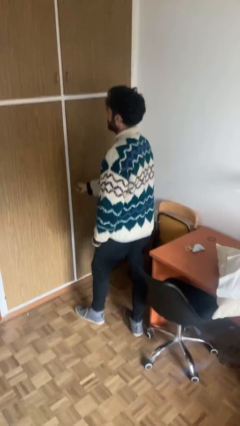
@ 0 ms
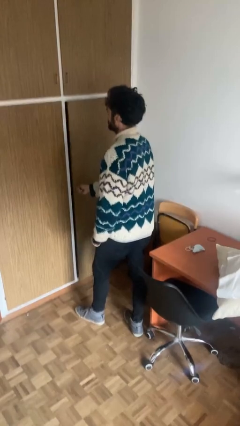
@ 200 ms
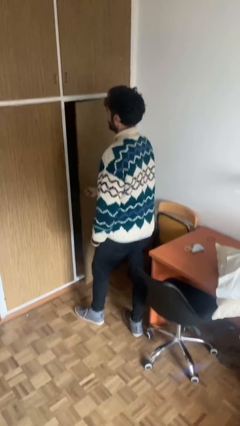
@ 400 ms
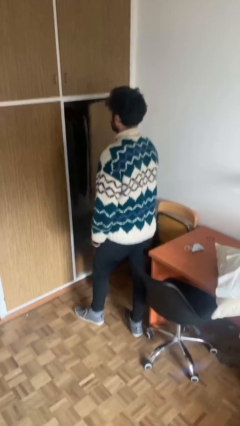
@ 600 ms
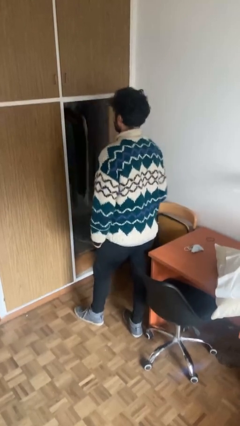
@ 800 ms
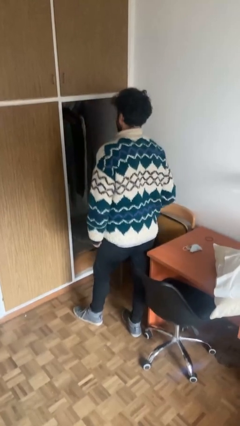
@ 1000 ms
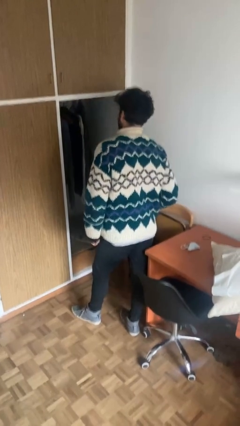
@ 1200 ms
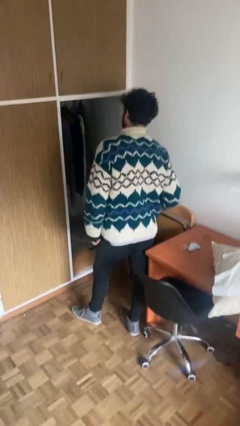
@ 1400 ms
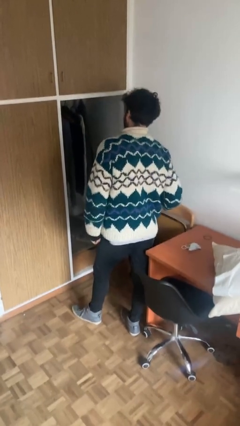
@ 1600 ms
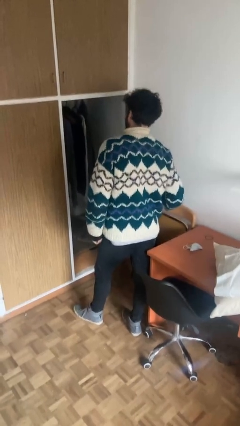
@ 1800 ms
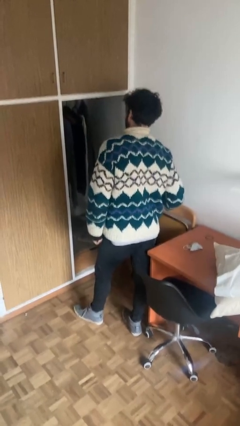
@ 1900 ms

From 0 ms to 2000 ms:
person opens closet door

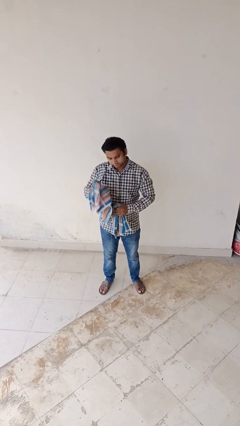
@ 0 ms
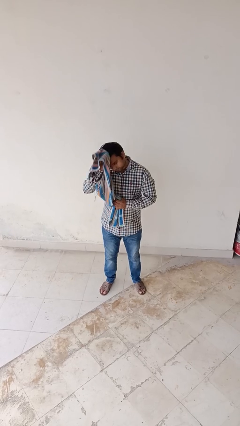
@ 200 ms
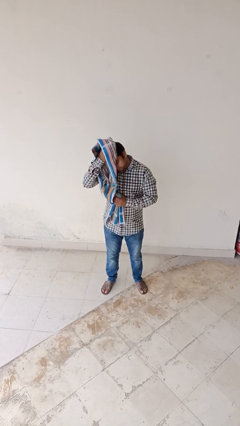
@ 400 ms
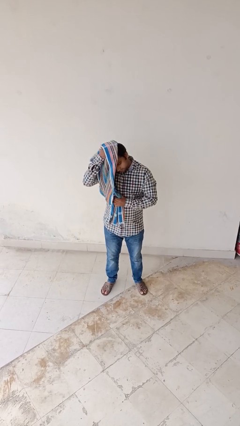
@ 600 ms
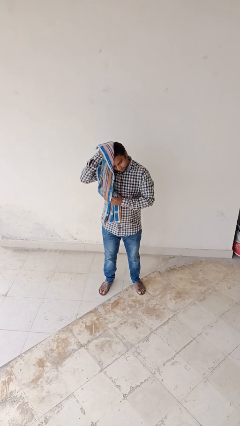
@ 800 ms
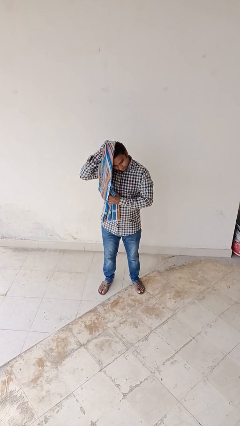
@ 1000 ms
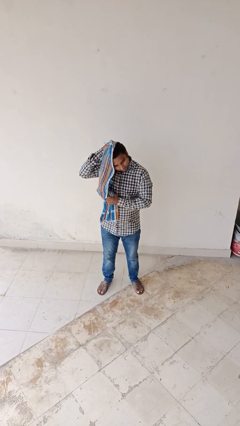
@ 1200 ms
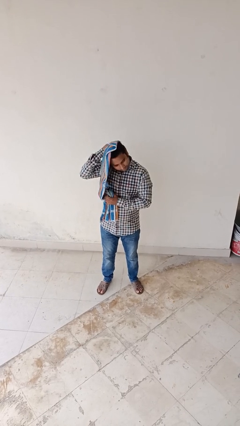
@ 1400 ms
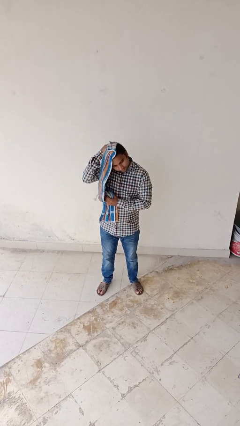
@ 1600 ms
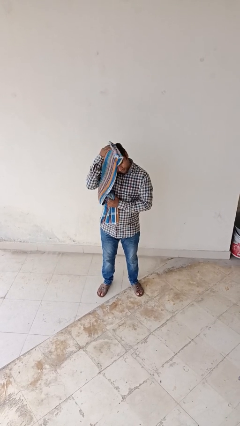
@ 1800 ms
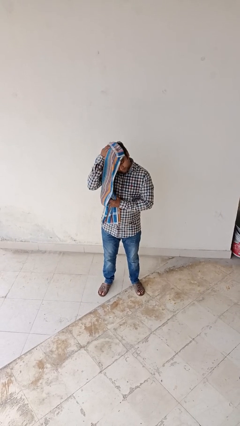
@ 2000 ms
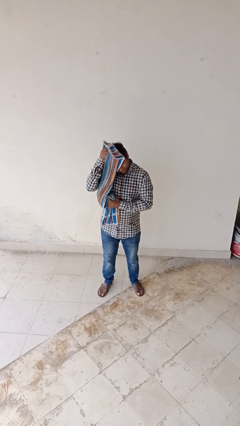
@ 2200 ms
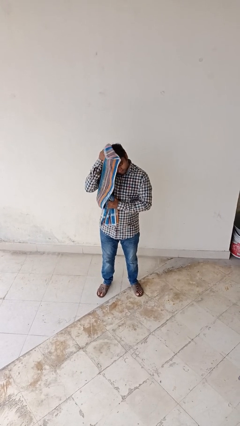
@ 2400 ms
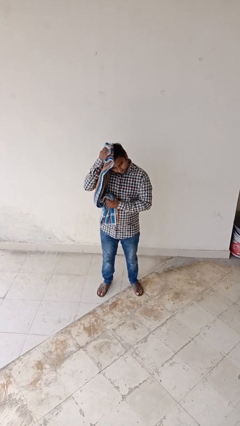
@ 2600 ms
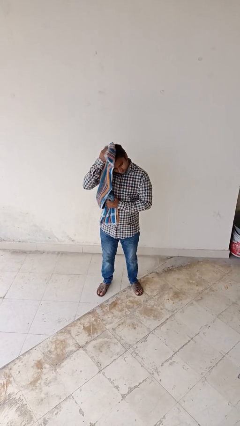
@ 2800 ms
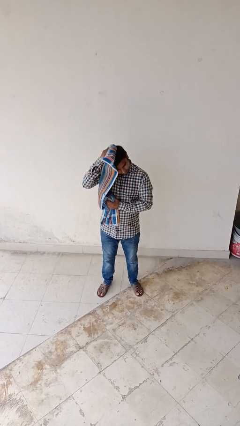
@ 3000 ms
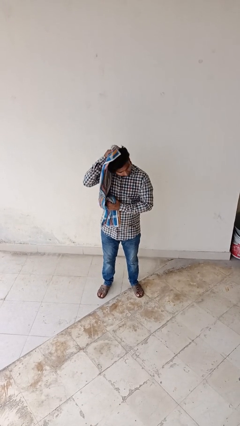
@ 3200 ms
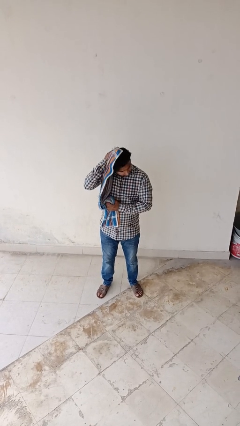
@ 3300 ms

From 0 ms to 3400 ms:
person dries hair with towel

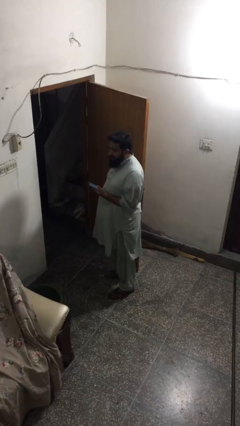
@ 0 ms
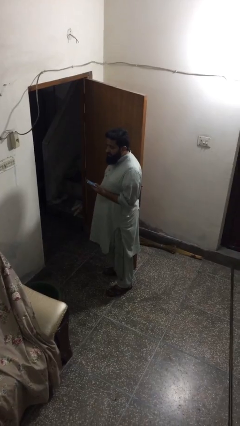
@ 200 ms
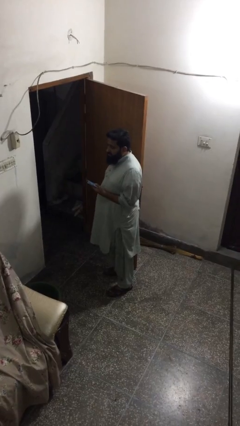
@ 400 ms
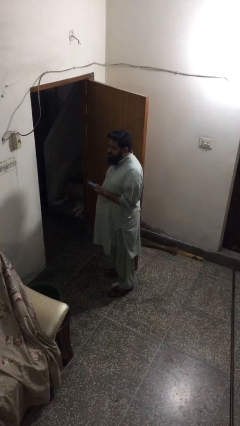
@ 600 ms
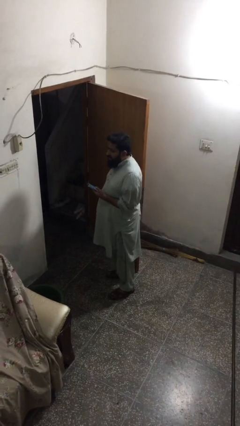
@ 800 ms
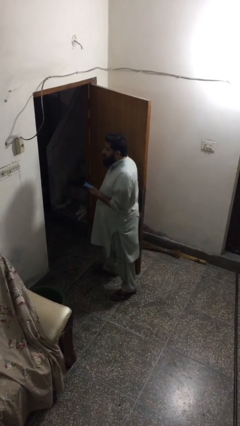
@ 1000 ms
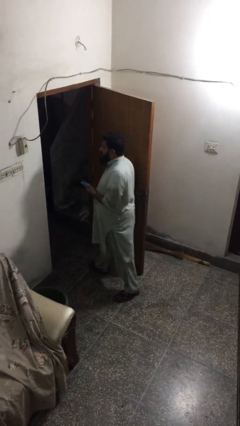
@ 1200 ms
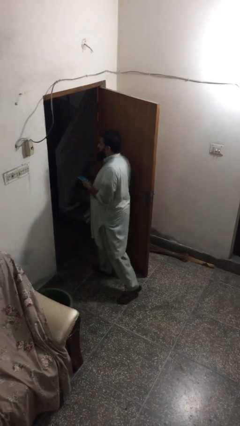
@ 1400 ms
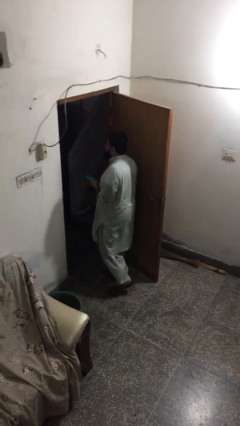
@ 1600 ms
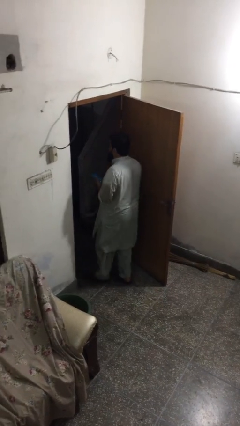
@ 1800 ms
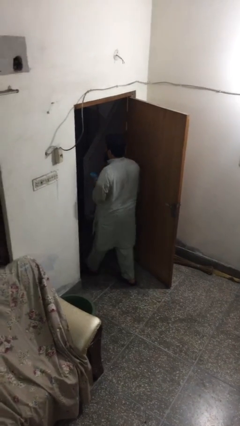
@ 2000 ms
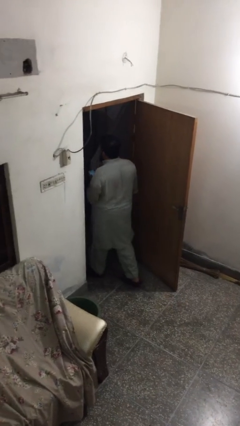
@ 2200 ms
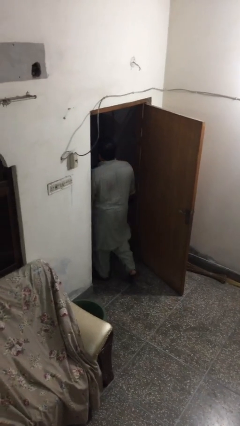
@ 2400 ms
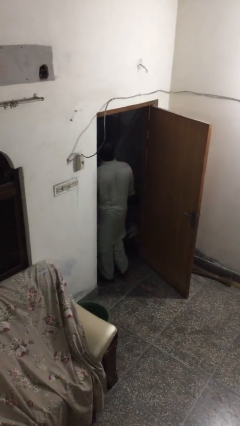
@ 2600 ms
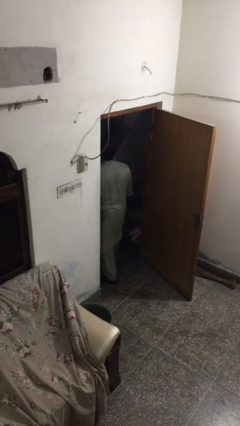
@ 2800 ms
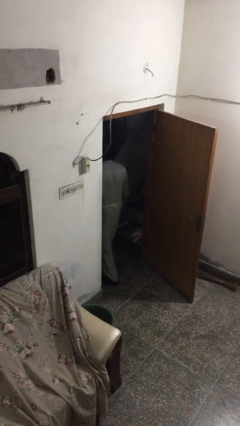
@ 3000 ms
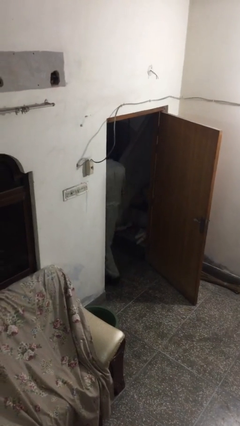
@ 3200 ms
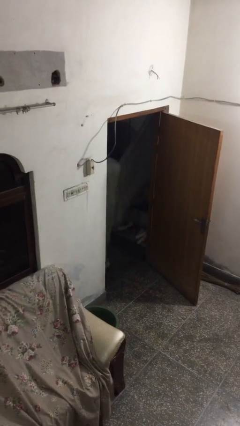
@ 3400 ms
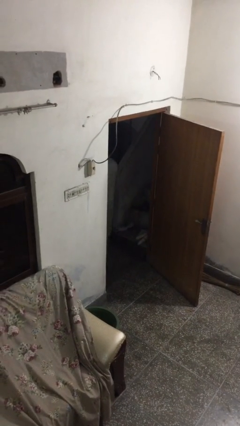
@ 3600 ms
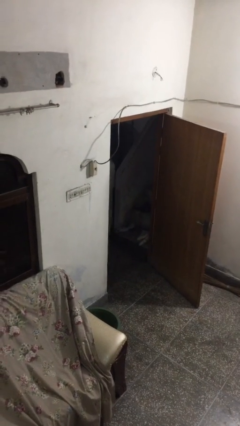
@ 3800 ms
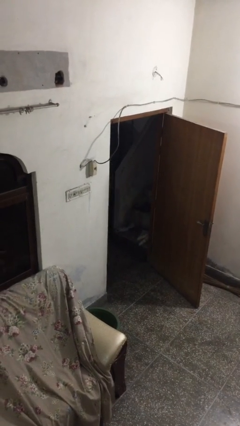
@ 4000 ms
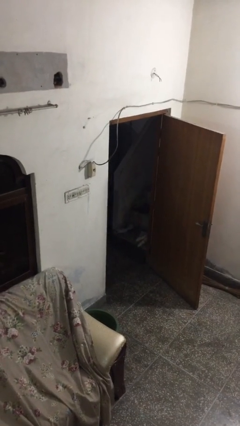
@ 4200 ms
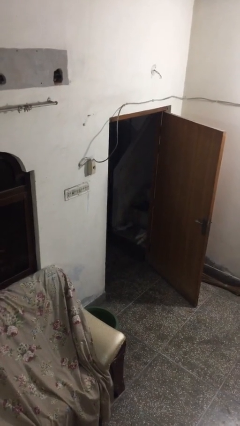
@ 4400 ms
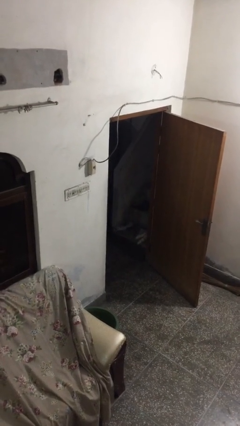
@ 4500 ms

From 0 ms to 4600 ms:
person exits scene through structure

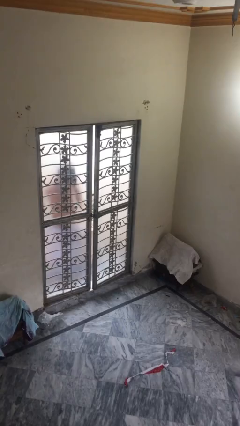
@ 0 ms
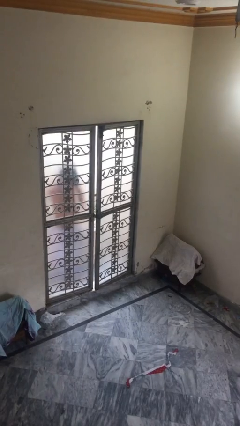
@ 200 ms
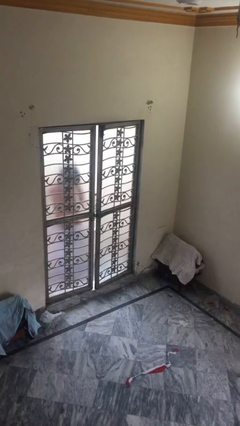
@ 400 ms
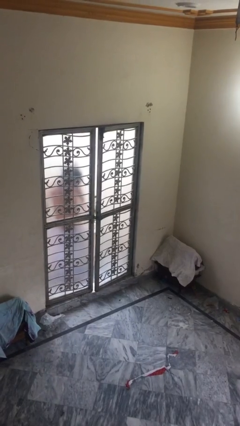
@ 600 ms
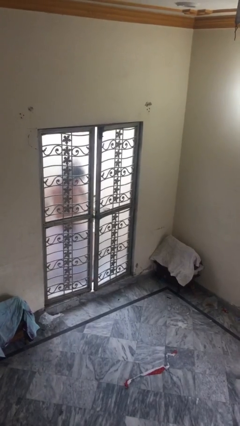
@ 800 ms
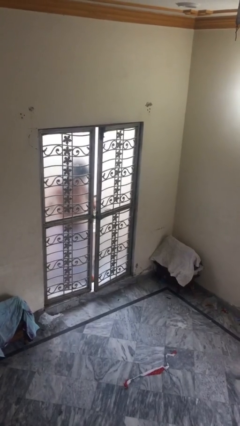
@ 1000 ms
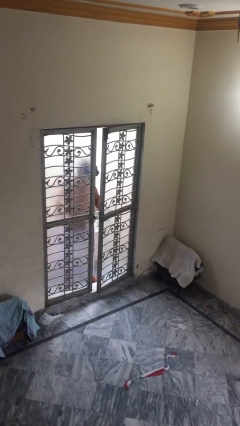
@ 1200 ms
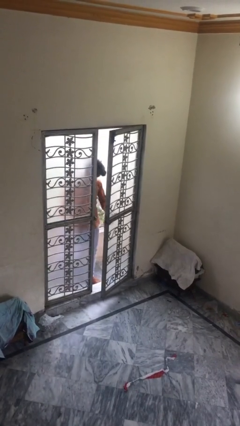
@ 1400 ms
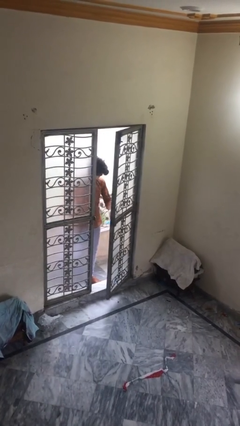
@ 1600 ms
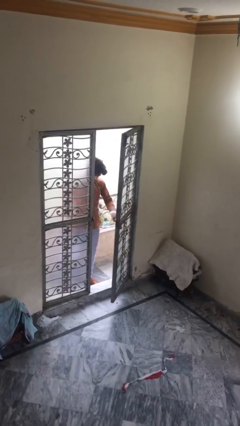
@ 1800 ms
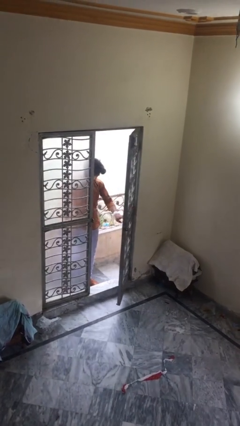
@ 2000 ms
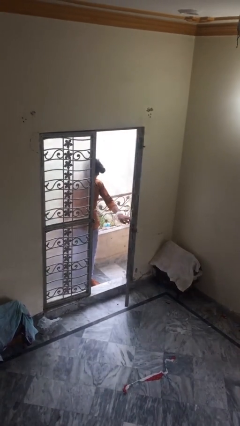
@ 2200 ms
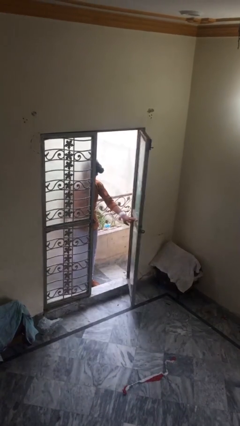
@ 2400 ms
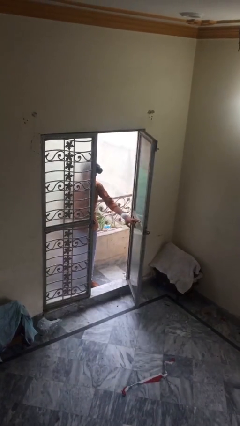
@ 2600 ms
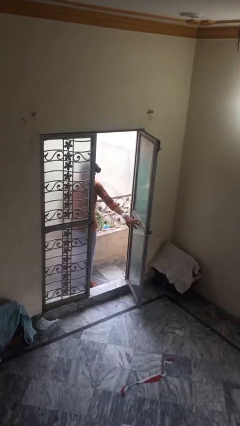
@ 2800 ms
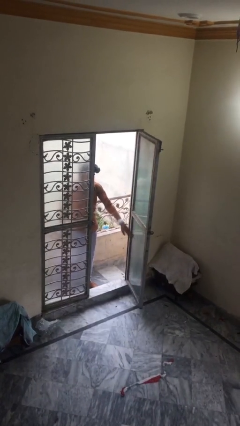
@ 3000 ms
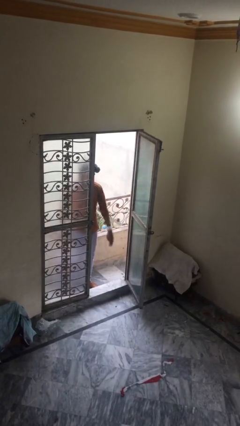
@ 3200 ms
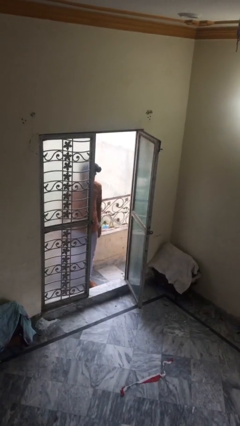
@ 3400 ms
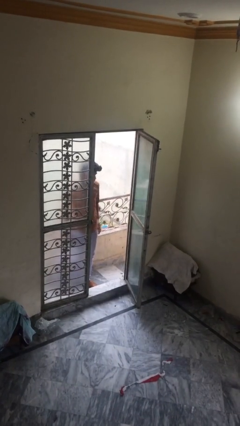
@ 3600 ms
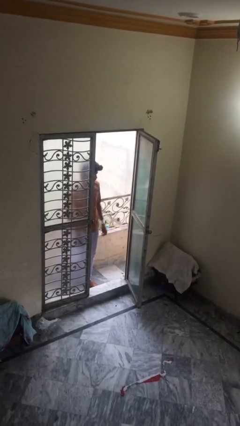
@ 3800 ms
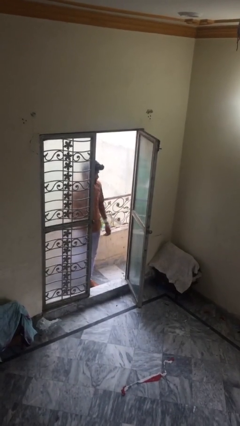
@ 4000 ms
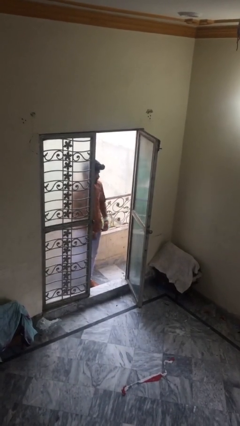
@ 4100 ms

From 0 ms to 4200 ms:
person opens facility door

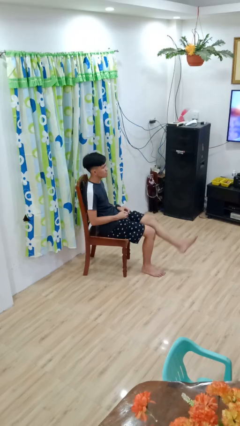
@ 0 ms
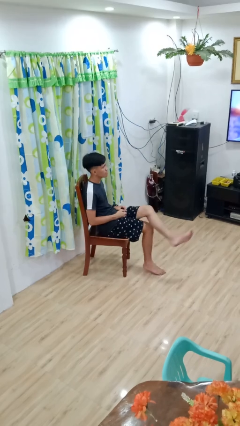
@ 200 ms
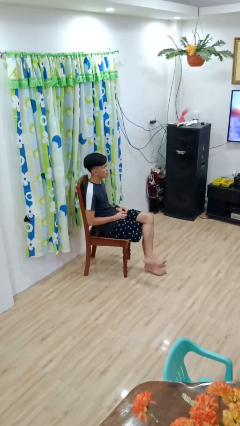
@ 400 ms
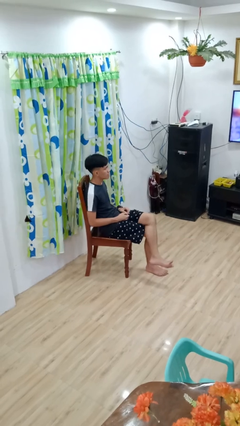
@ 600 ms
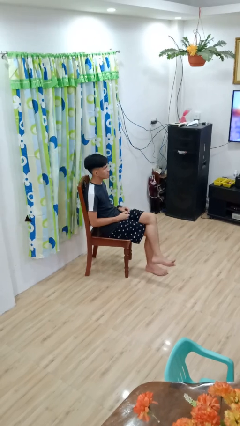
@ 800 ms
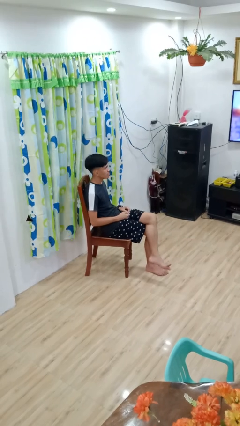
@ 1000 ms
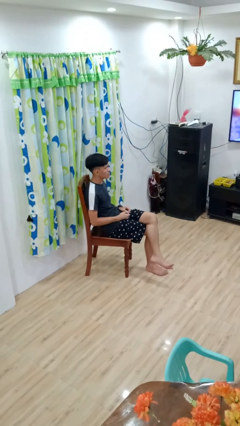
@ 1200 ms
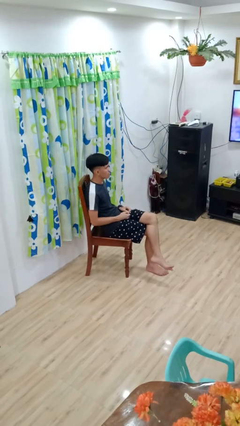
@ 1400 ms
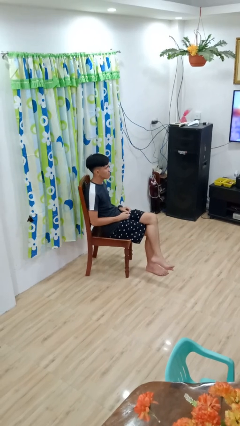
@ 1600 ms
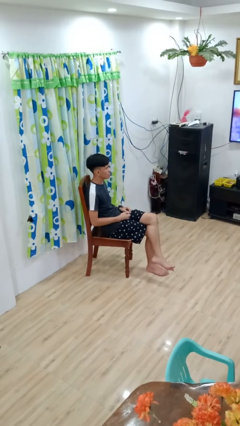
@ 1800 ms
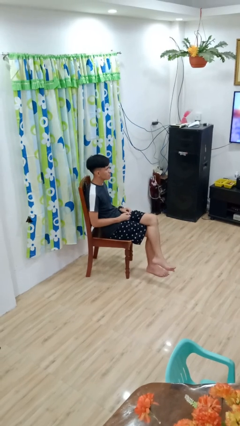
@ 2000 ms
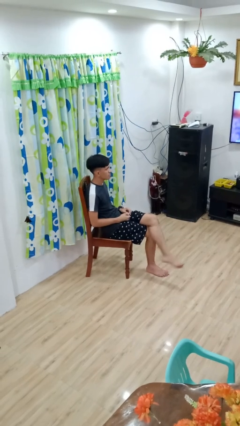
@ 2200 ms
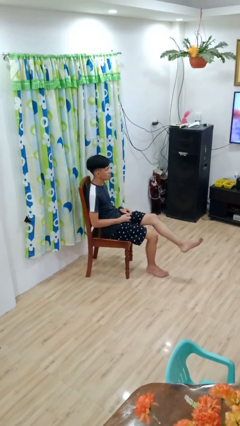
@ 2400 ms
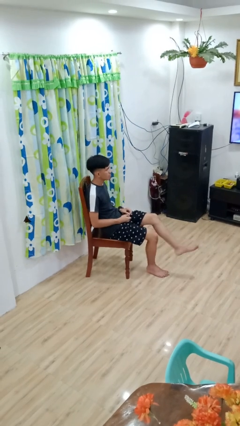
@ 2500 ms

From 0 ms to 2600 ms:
person crosses legs

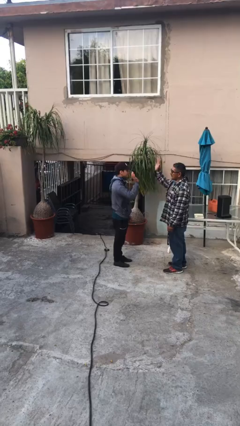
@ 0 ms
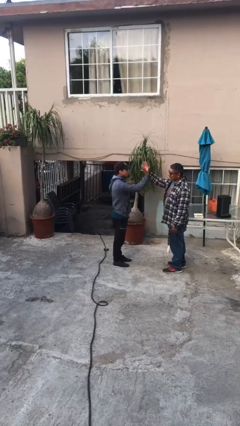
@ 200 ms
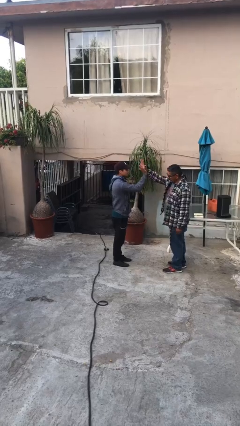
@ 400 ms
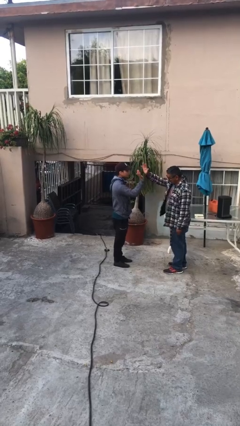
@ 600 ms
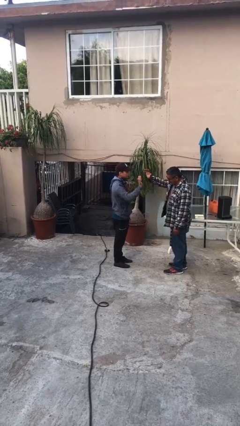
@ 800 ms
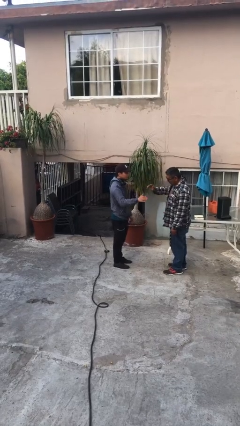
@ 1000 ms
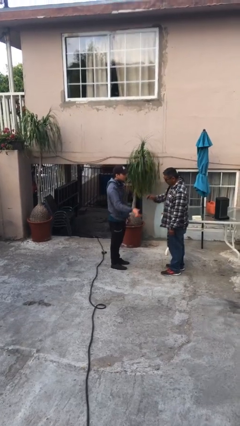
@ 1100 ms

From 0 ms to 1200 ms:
person highfives hand
